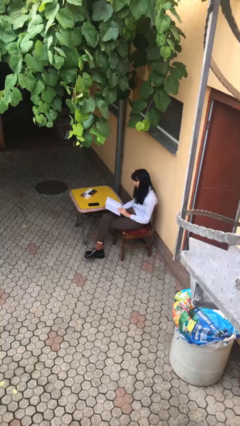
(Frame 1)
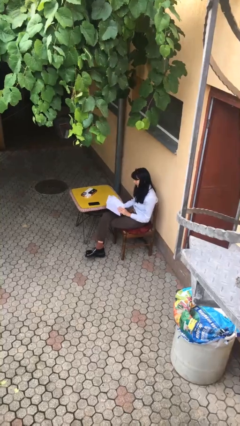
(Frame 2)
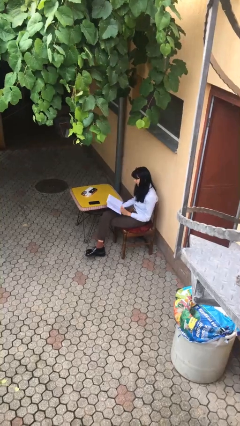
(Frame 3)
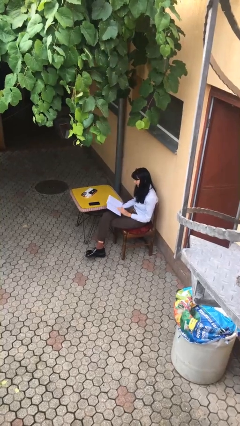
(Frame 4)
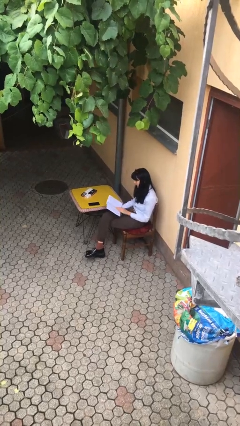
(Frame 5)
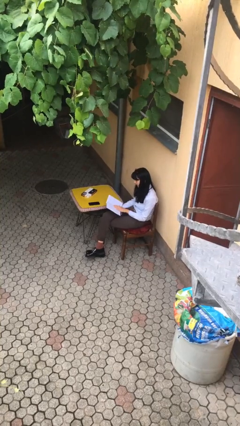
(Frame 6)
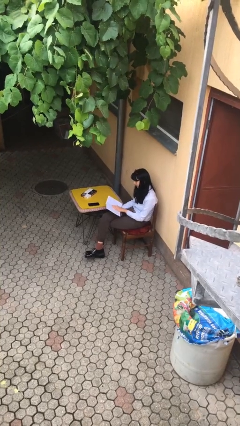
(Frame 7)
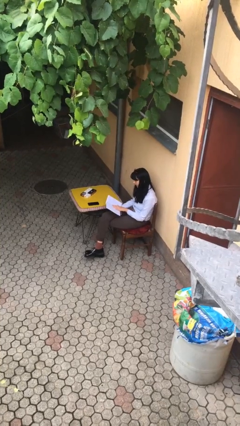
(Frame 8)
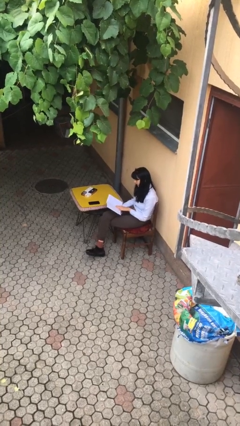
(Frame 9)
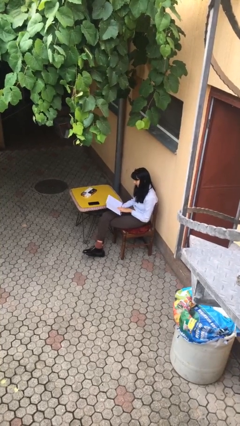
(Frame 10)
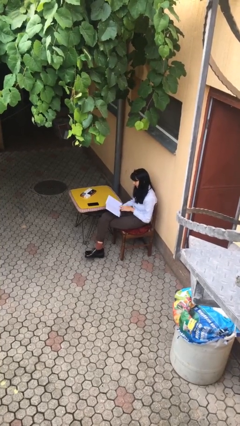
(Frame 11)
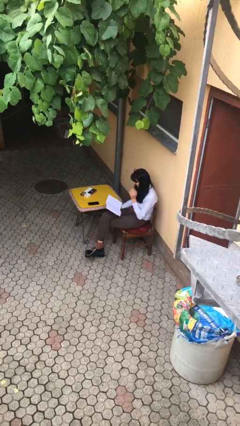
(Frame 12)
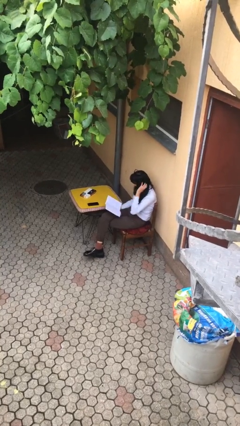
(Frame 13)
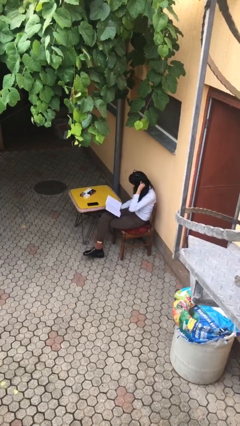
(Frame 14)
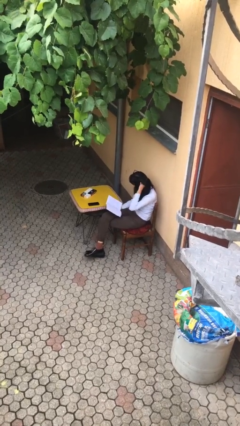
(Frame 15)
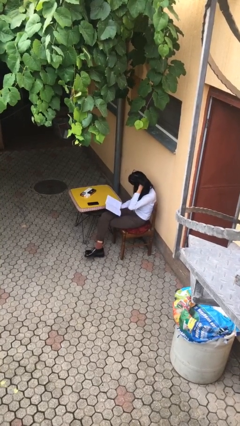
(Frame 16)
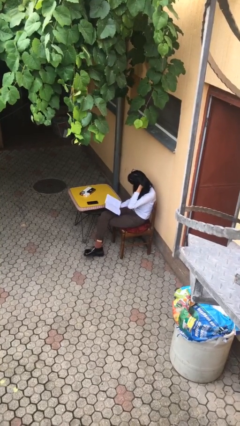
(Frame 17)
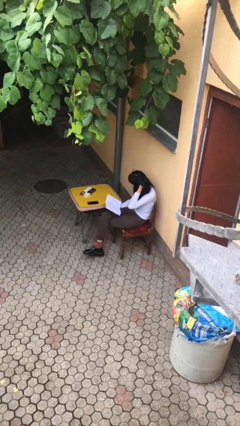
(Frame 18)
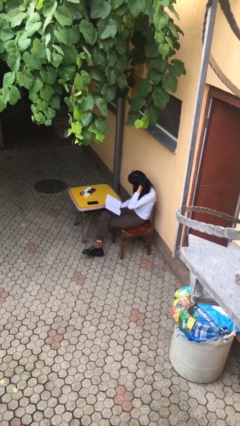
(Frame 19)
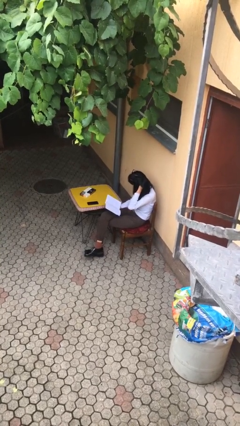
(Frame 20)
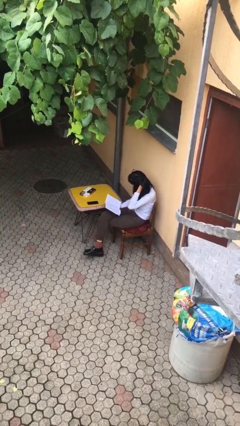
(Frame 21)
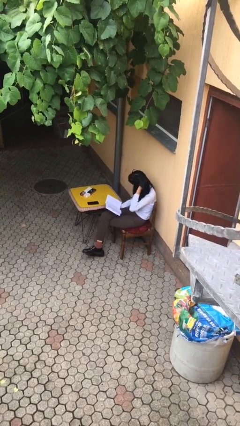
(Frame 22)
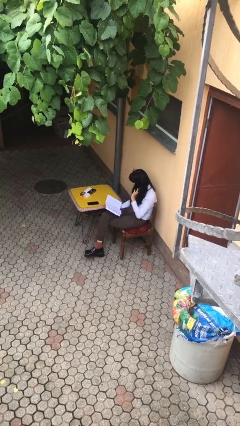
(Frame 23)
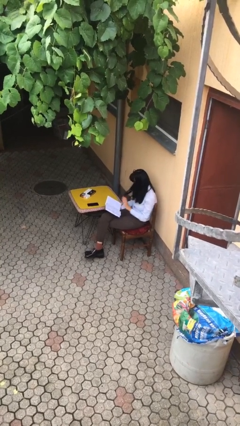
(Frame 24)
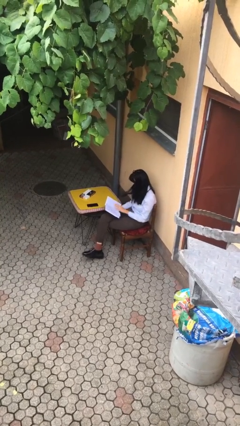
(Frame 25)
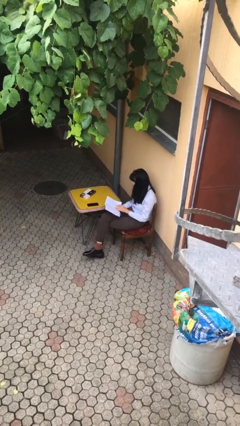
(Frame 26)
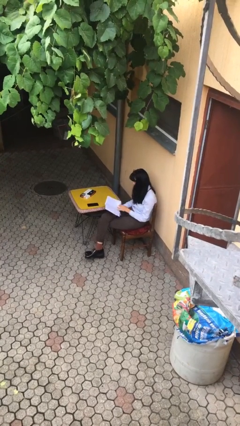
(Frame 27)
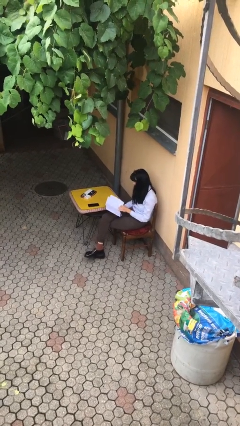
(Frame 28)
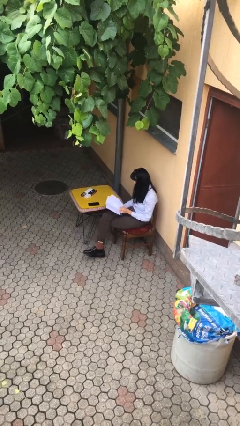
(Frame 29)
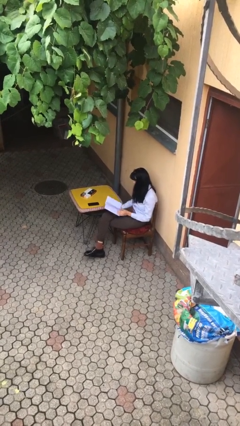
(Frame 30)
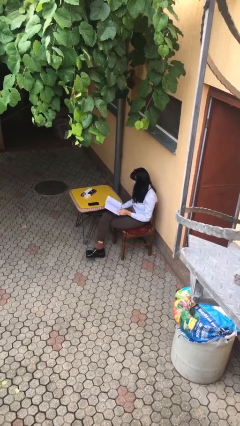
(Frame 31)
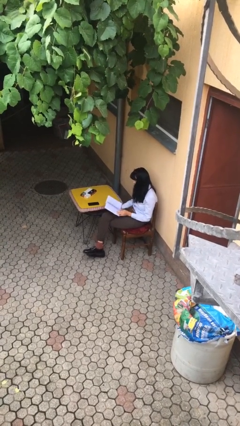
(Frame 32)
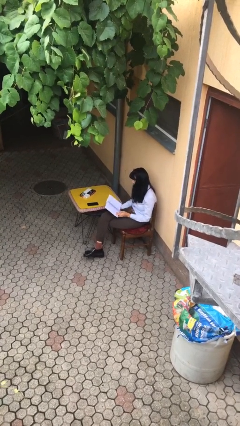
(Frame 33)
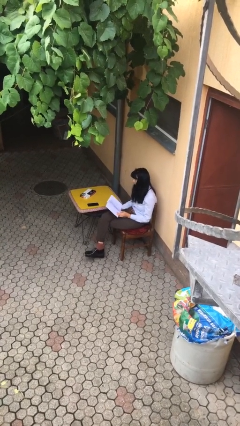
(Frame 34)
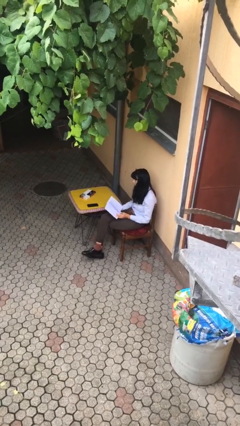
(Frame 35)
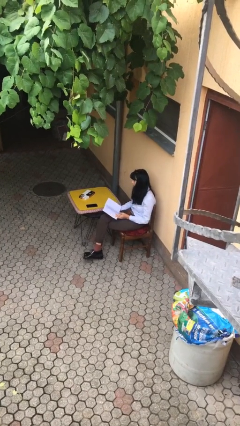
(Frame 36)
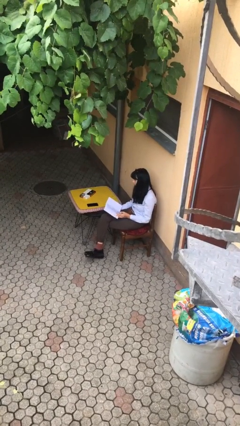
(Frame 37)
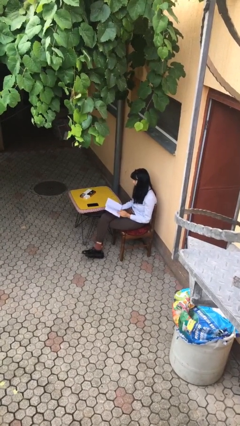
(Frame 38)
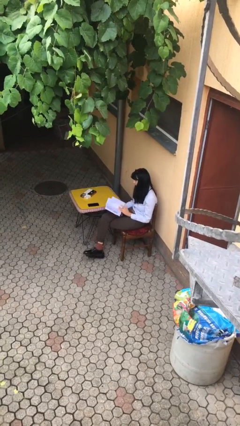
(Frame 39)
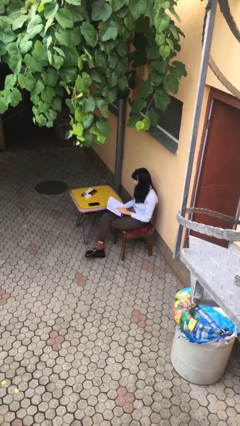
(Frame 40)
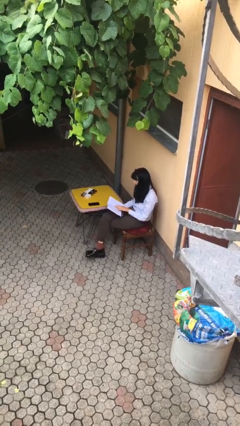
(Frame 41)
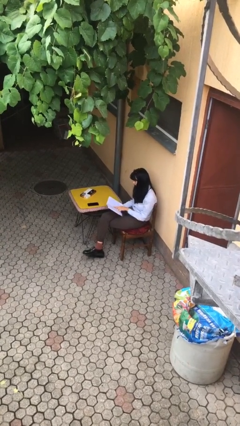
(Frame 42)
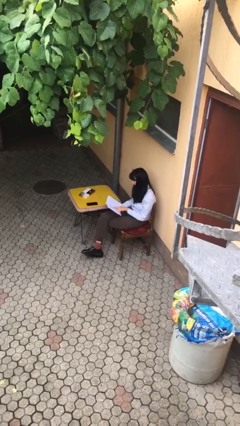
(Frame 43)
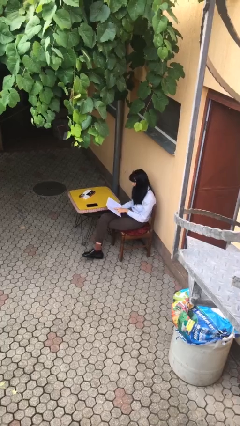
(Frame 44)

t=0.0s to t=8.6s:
person reads document

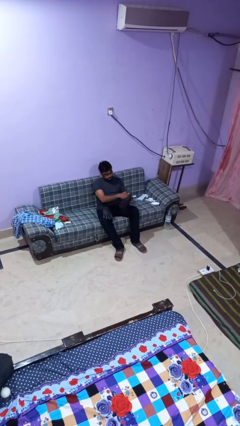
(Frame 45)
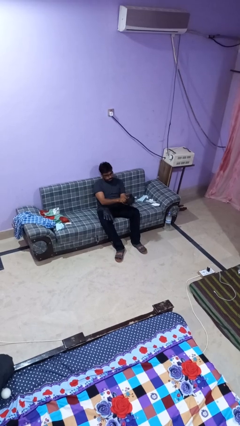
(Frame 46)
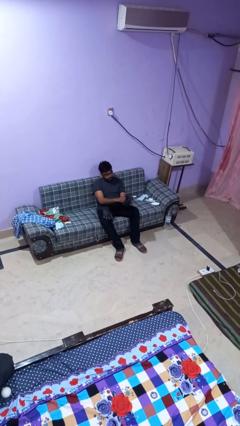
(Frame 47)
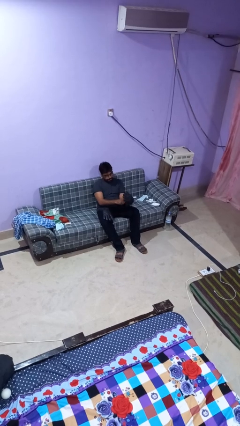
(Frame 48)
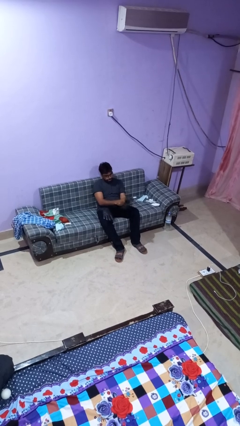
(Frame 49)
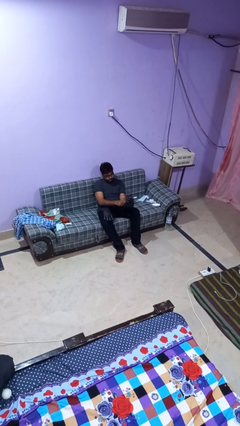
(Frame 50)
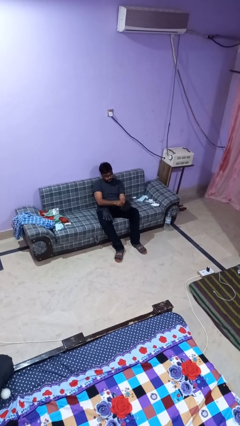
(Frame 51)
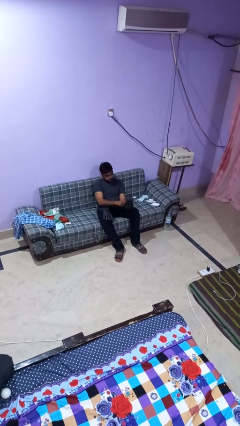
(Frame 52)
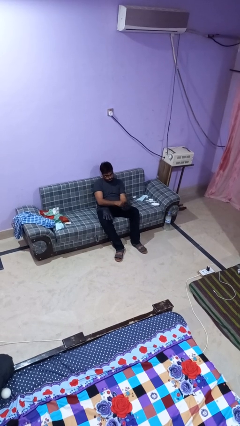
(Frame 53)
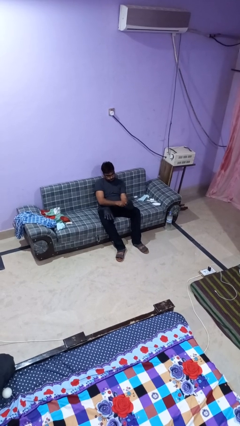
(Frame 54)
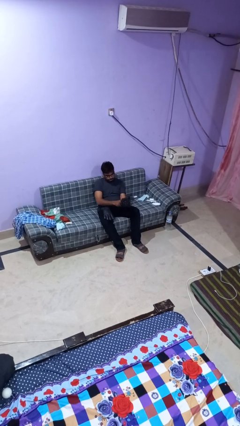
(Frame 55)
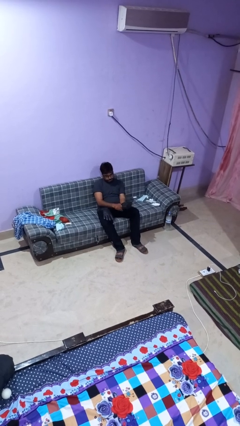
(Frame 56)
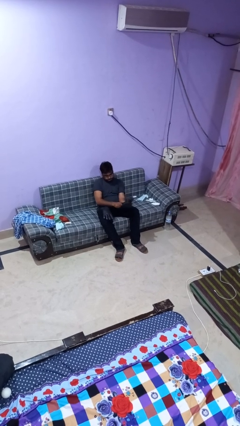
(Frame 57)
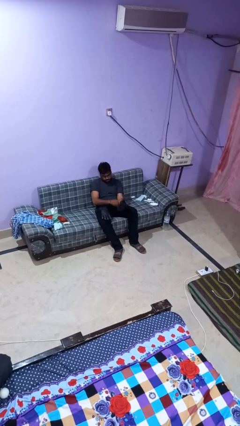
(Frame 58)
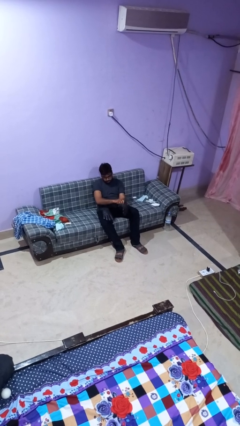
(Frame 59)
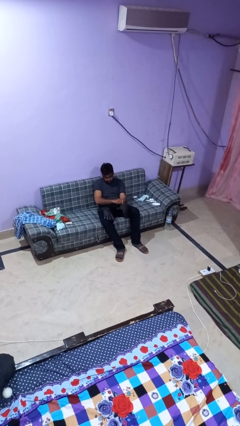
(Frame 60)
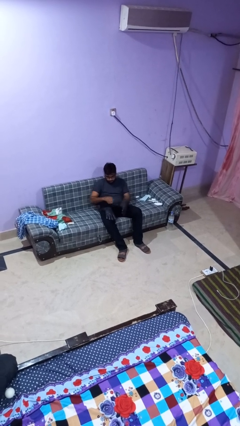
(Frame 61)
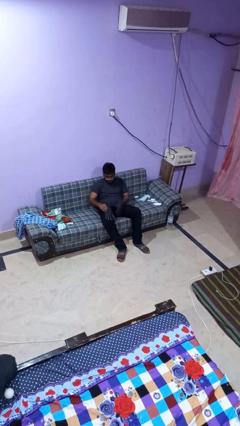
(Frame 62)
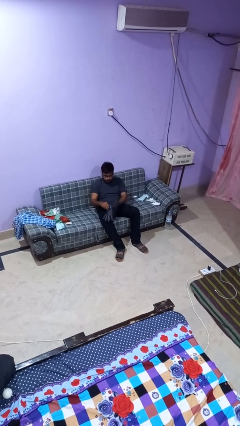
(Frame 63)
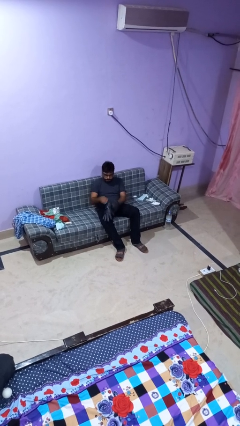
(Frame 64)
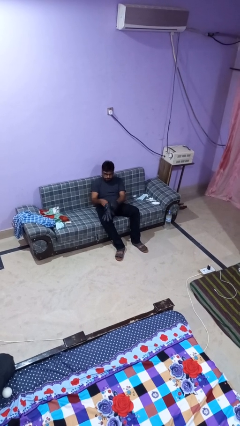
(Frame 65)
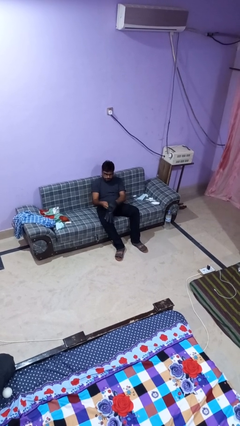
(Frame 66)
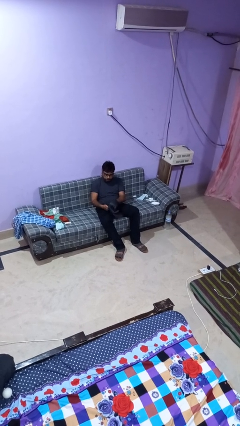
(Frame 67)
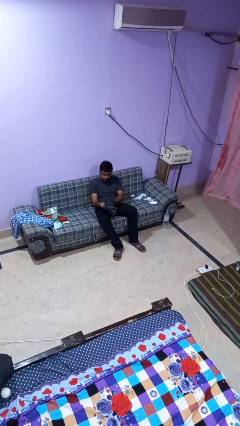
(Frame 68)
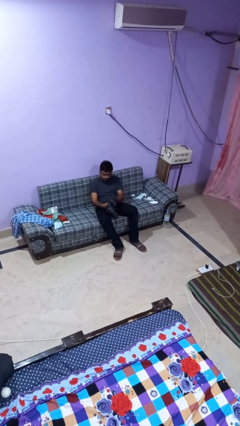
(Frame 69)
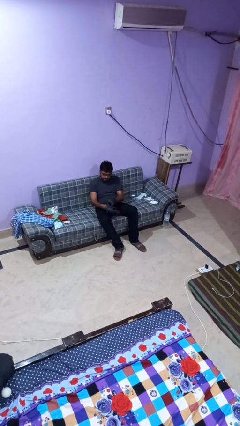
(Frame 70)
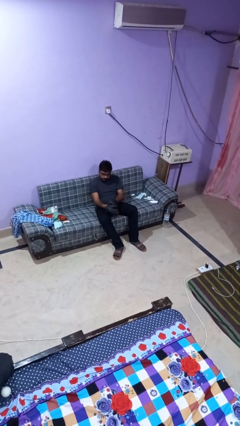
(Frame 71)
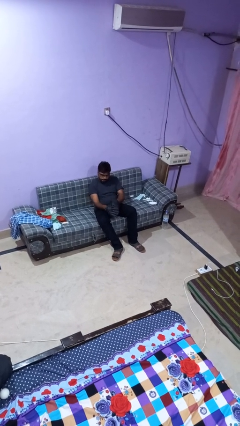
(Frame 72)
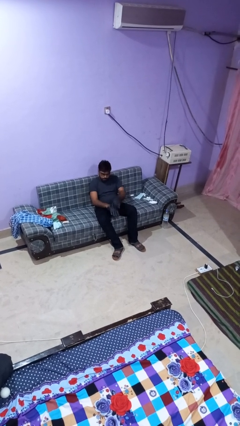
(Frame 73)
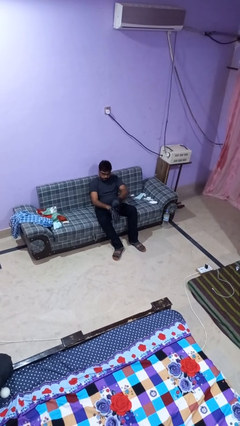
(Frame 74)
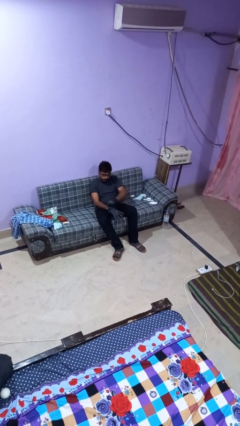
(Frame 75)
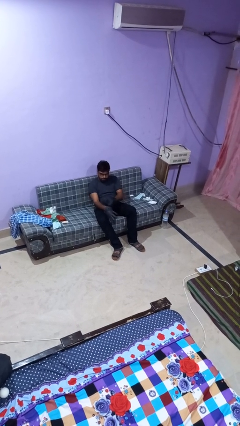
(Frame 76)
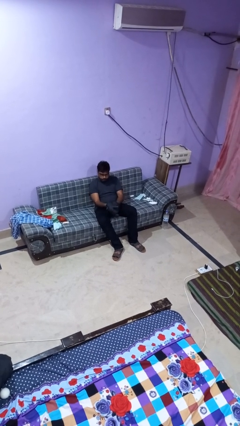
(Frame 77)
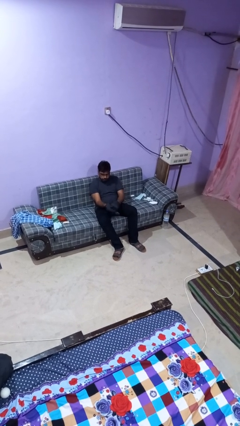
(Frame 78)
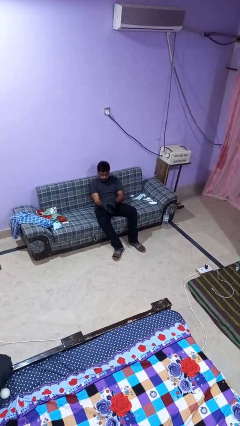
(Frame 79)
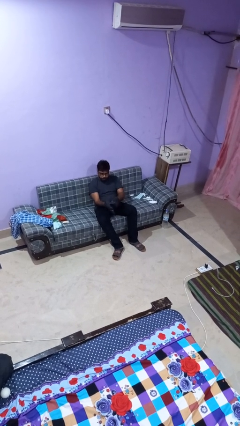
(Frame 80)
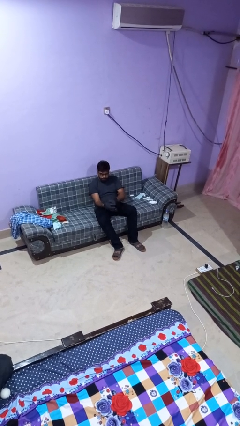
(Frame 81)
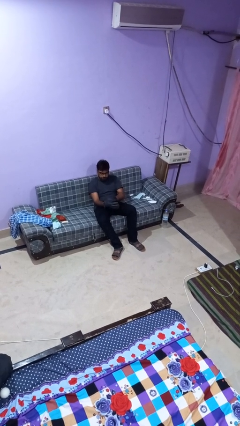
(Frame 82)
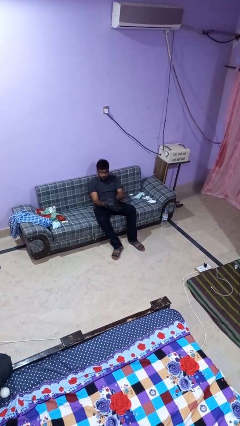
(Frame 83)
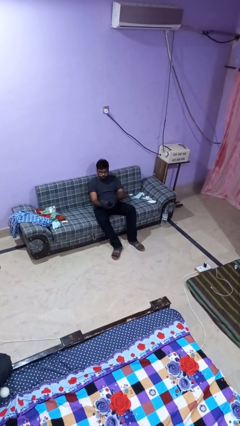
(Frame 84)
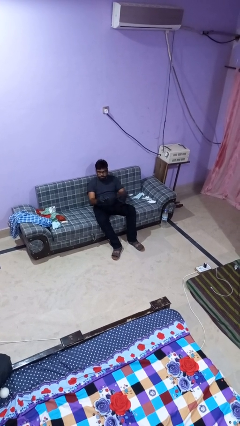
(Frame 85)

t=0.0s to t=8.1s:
person puts on gloves

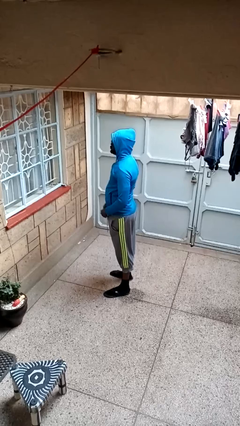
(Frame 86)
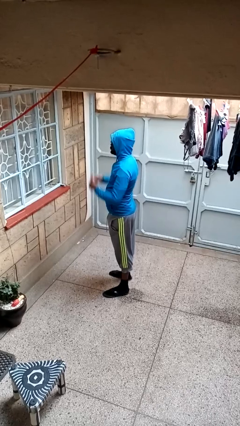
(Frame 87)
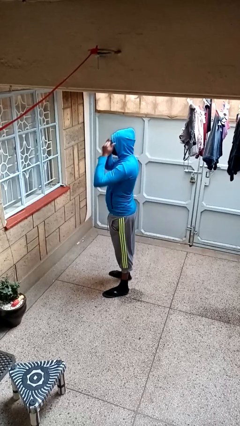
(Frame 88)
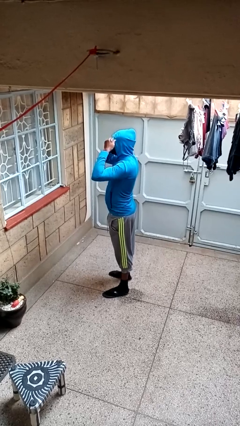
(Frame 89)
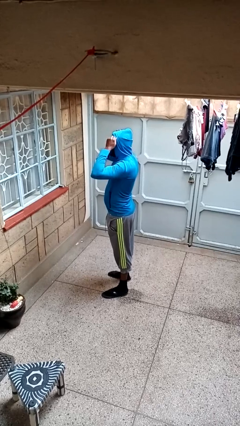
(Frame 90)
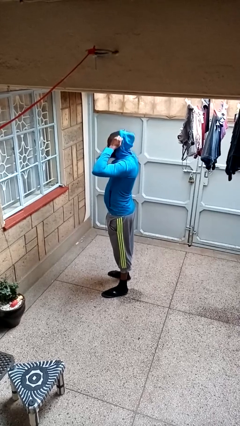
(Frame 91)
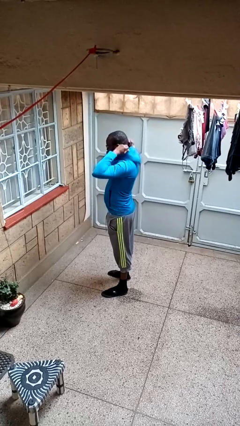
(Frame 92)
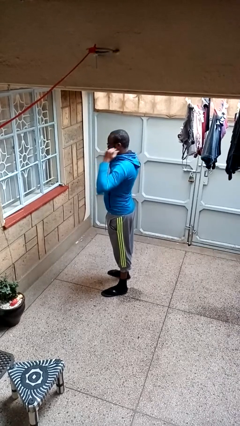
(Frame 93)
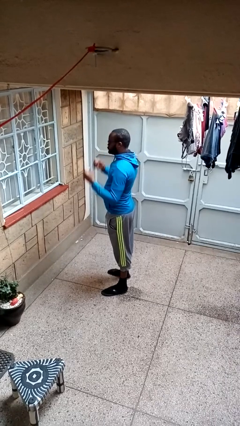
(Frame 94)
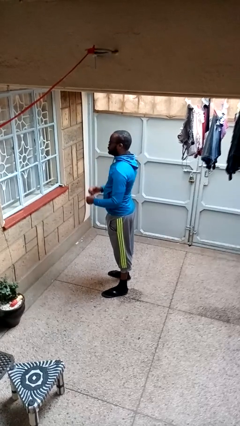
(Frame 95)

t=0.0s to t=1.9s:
person takes off hoodie
